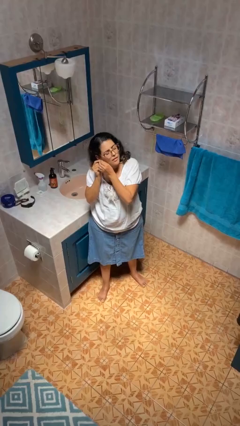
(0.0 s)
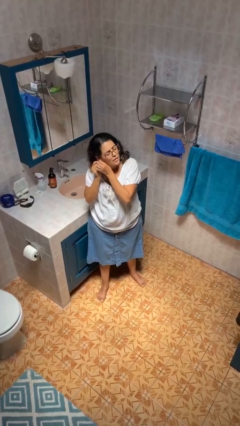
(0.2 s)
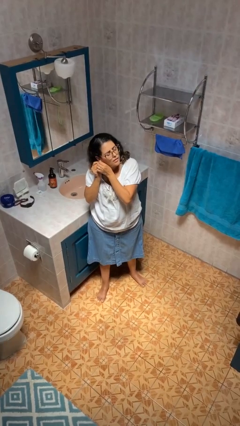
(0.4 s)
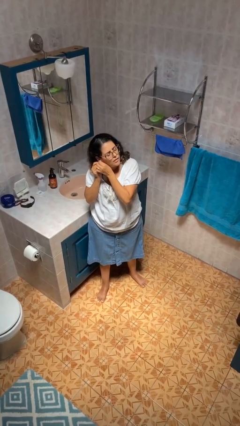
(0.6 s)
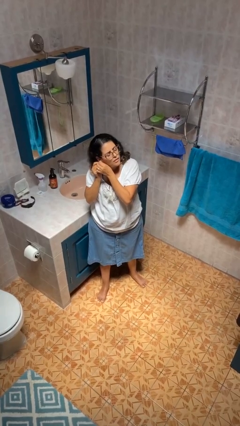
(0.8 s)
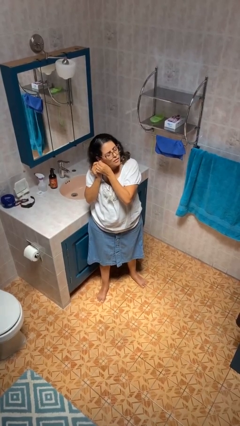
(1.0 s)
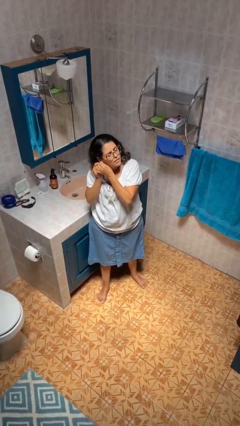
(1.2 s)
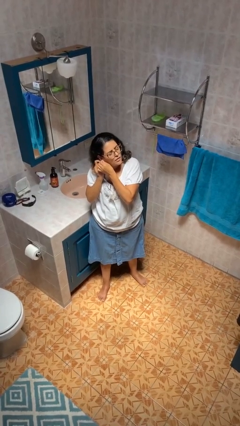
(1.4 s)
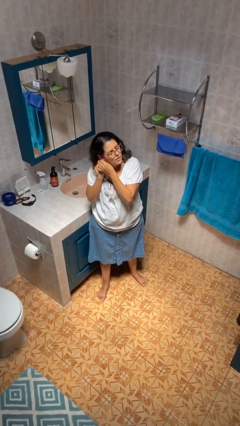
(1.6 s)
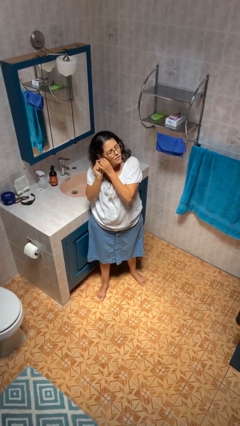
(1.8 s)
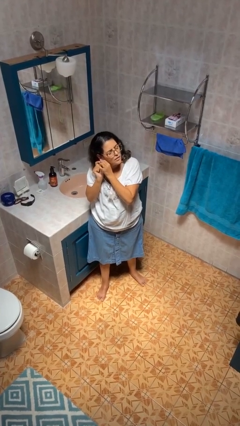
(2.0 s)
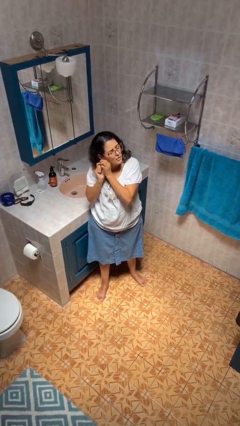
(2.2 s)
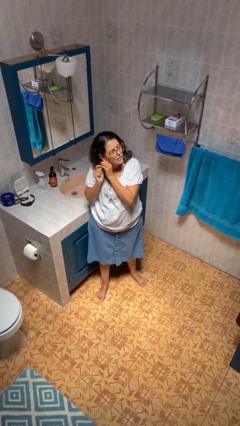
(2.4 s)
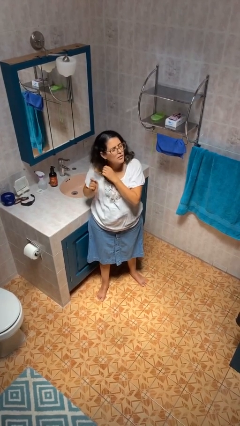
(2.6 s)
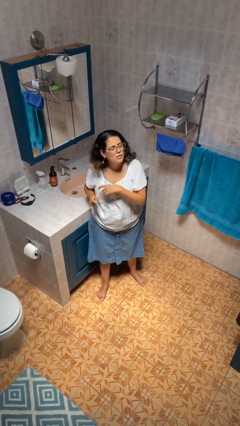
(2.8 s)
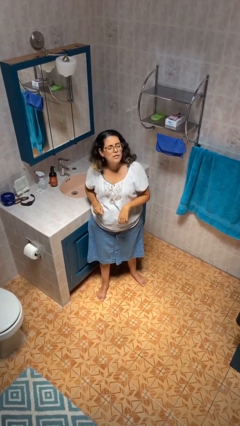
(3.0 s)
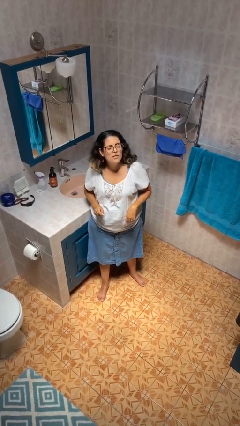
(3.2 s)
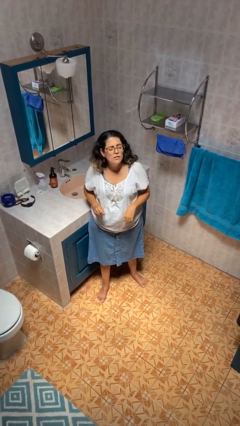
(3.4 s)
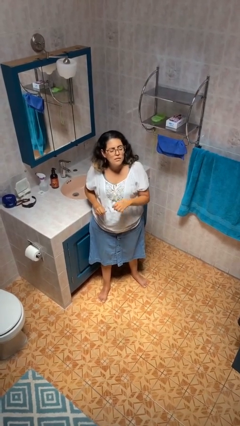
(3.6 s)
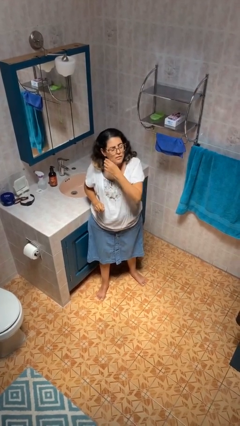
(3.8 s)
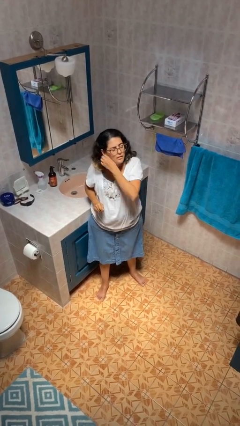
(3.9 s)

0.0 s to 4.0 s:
person puts on earrings

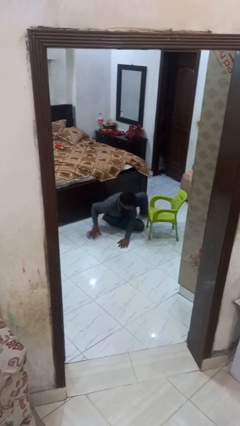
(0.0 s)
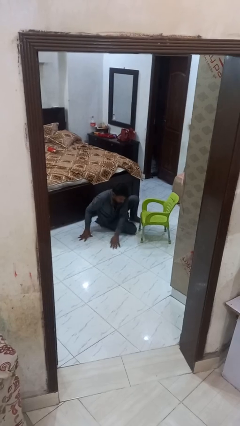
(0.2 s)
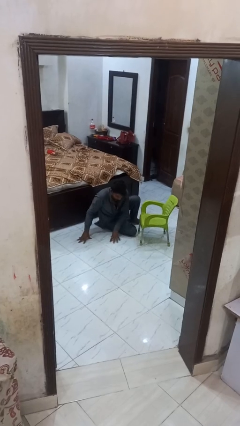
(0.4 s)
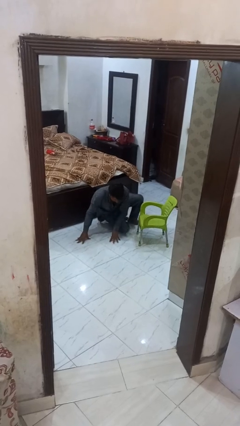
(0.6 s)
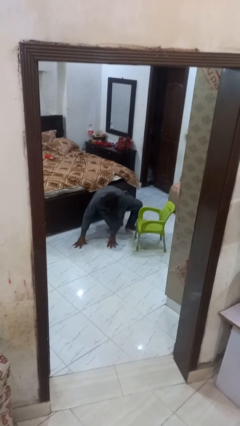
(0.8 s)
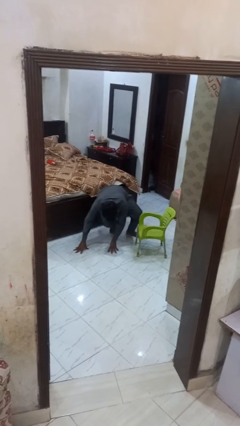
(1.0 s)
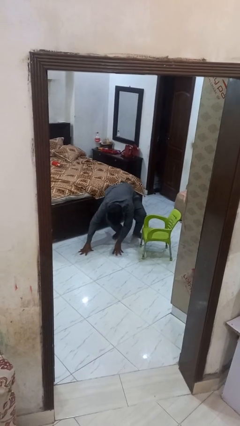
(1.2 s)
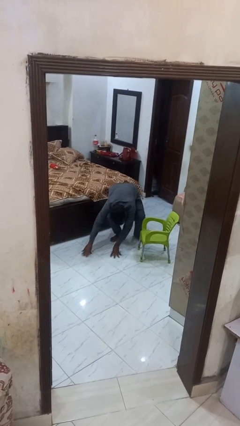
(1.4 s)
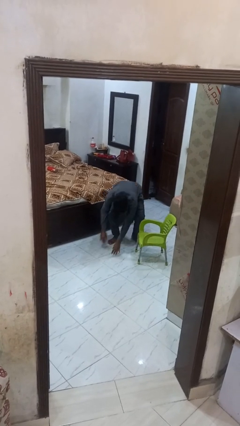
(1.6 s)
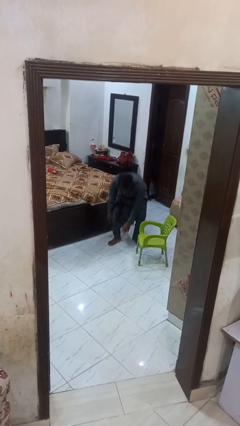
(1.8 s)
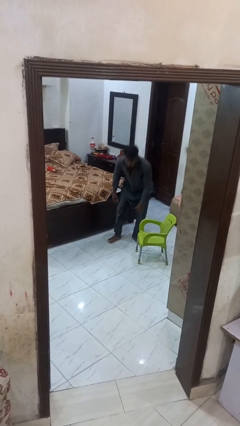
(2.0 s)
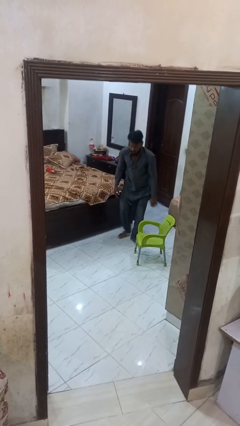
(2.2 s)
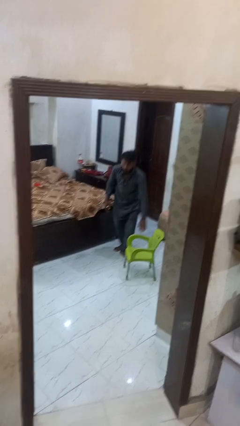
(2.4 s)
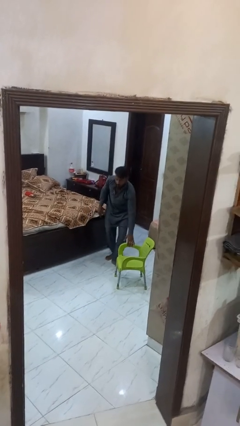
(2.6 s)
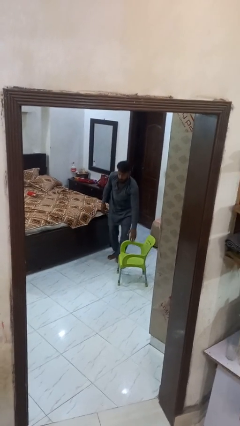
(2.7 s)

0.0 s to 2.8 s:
person stands up from floor

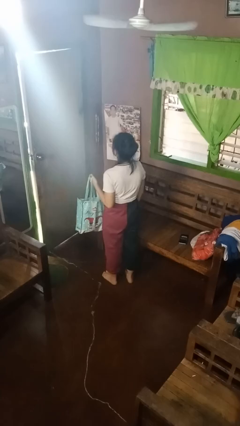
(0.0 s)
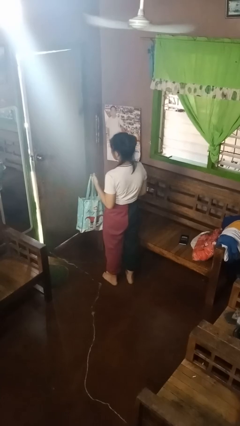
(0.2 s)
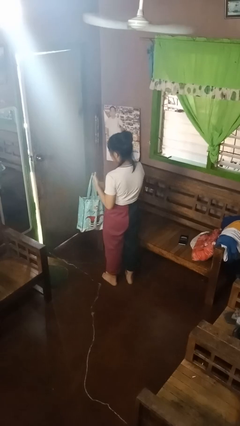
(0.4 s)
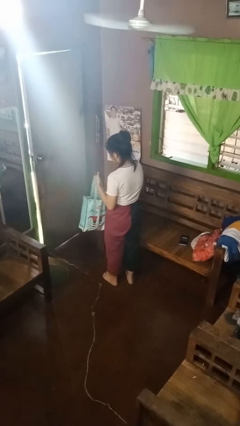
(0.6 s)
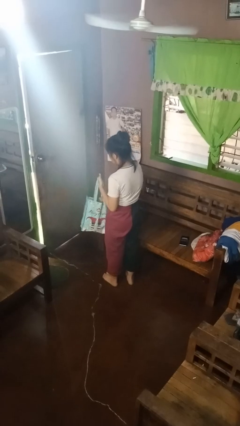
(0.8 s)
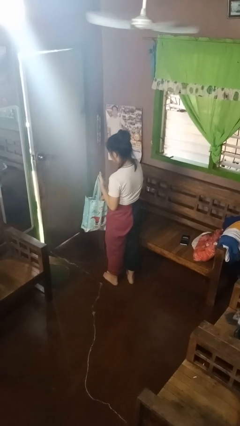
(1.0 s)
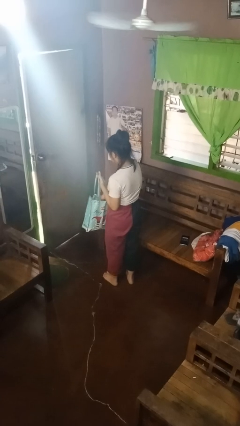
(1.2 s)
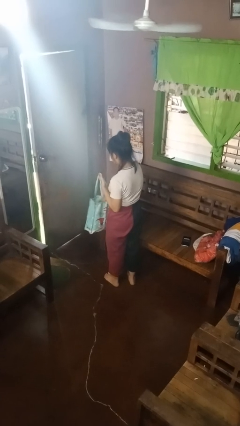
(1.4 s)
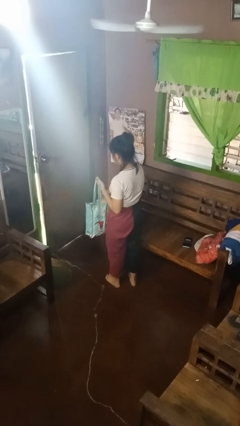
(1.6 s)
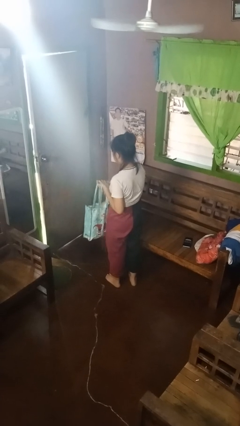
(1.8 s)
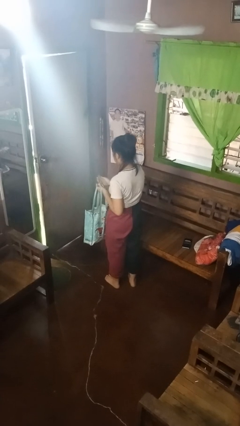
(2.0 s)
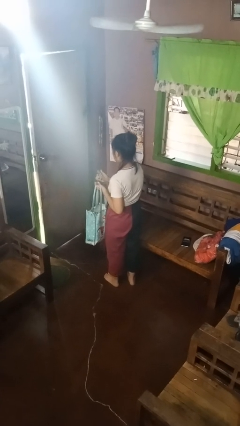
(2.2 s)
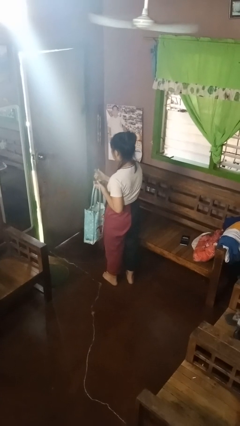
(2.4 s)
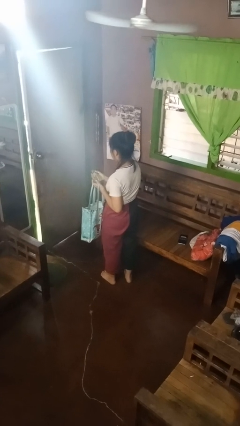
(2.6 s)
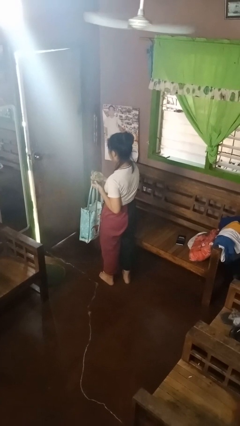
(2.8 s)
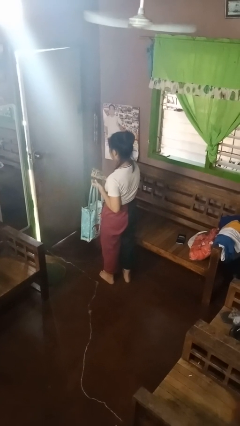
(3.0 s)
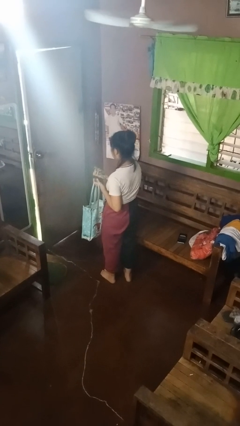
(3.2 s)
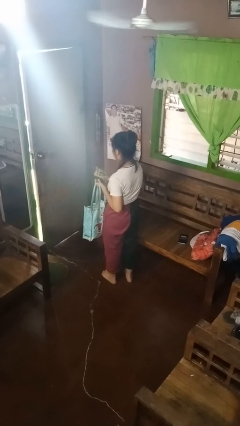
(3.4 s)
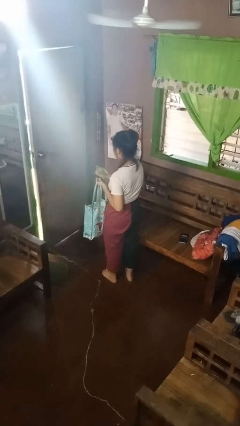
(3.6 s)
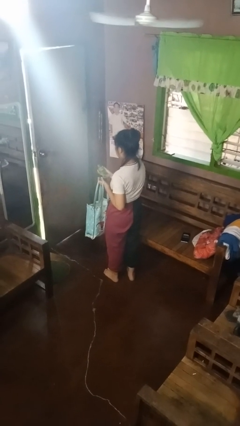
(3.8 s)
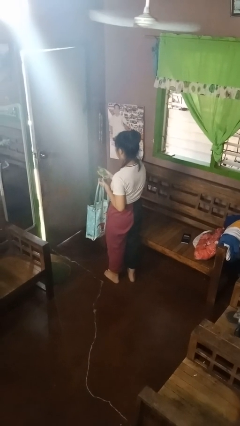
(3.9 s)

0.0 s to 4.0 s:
person takes object from bag

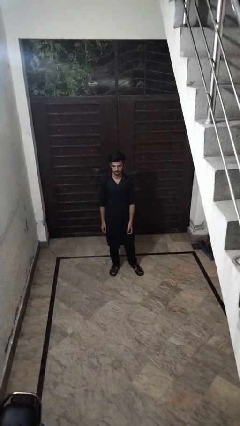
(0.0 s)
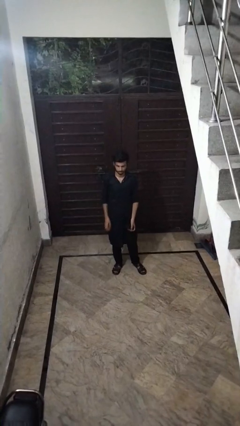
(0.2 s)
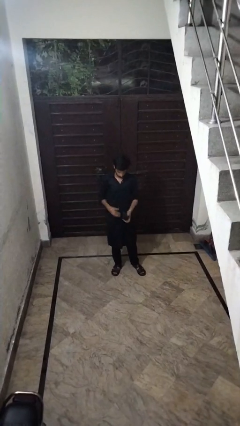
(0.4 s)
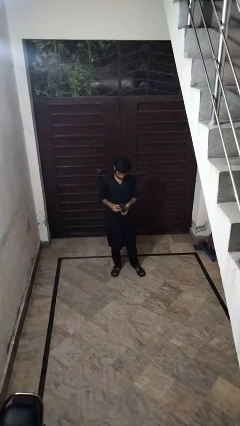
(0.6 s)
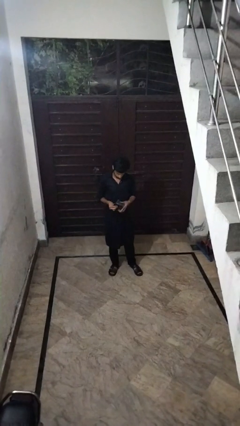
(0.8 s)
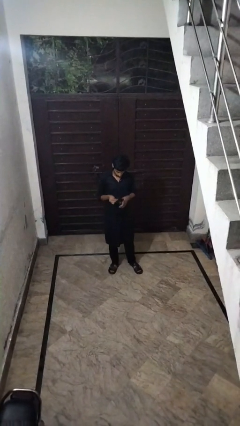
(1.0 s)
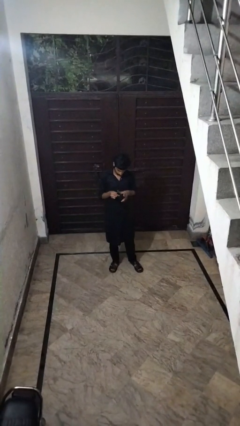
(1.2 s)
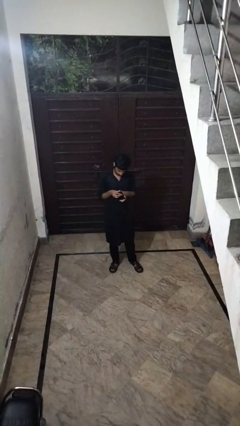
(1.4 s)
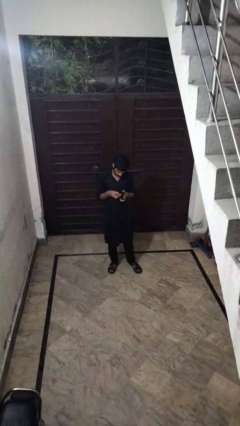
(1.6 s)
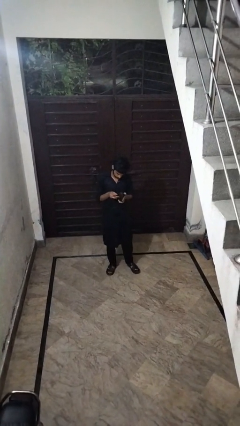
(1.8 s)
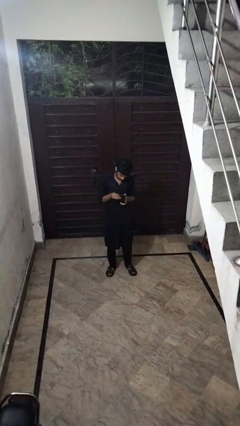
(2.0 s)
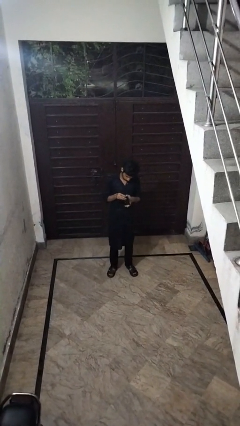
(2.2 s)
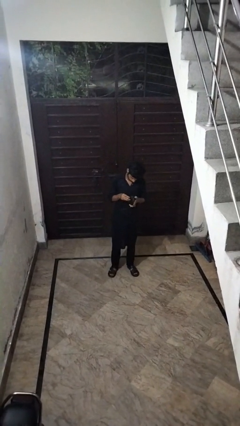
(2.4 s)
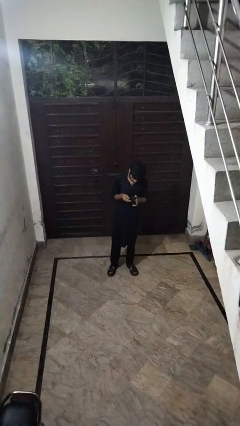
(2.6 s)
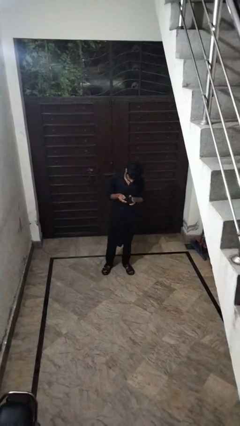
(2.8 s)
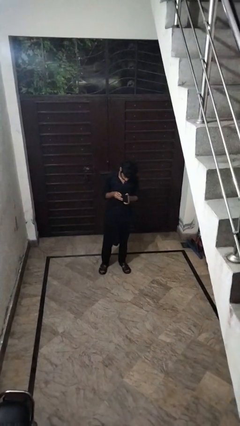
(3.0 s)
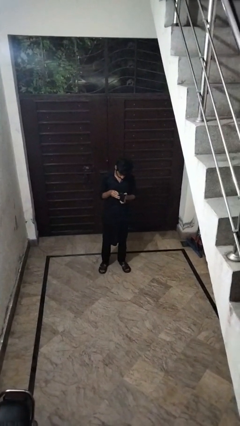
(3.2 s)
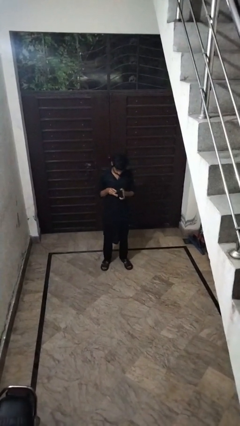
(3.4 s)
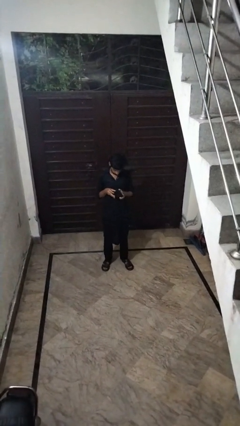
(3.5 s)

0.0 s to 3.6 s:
person searches in purse

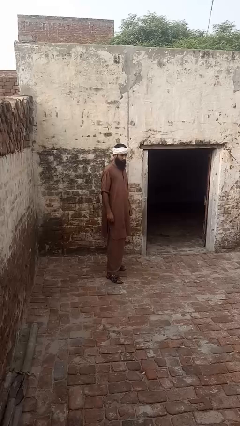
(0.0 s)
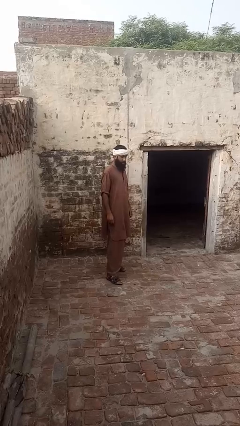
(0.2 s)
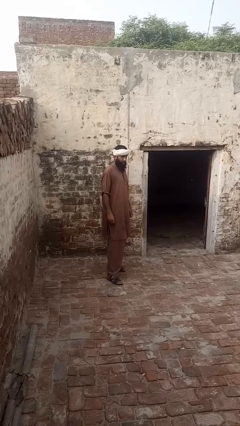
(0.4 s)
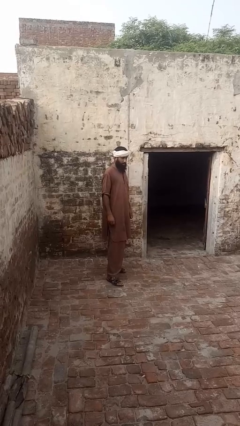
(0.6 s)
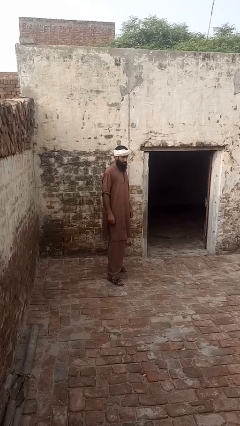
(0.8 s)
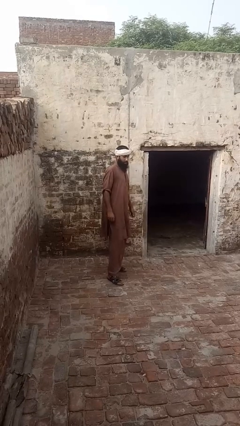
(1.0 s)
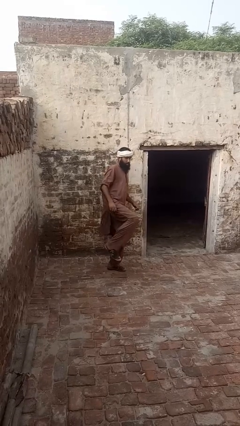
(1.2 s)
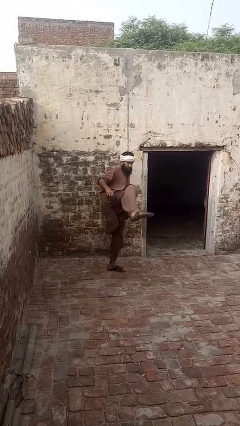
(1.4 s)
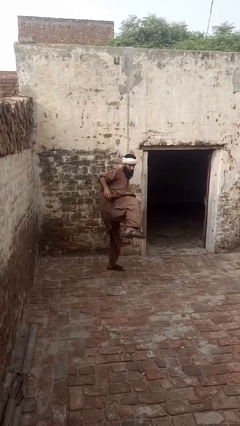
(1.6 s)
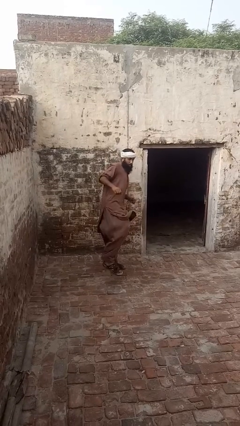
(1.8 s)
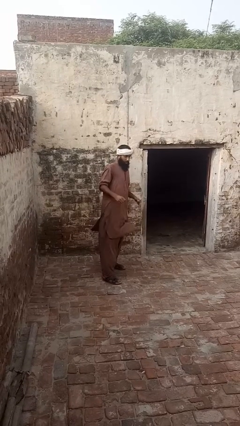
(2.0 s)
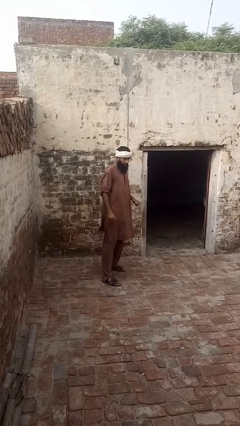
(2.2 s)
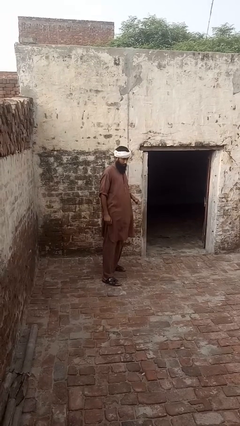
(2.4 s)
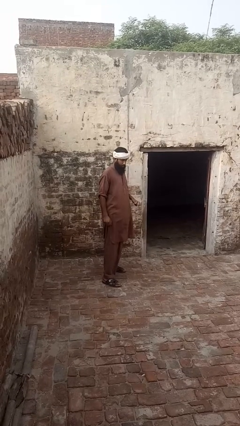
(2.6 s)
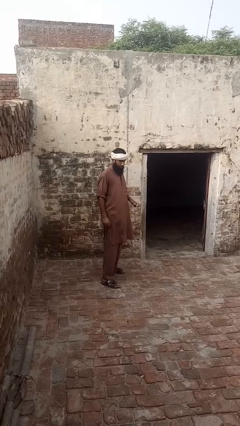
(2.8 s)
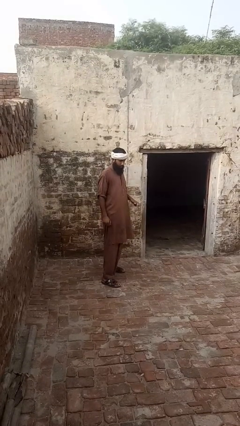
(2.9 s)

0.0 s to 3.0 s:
person karate kicks

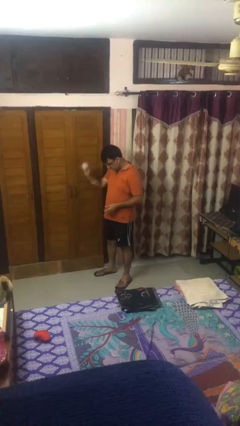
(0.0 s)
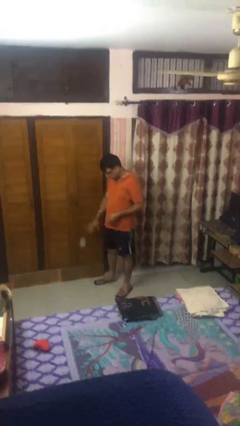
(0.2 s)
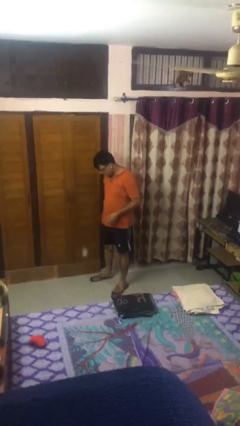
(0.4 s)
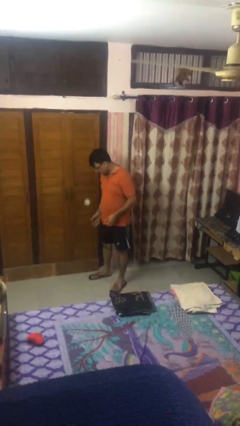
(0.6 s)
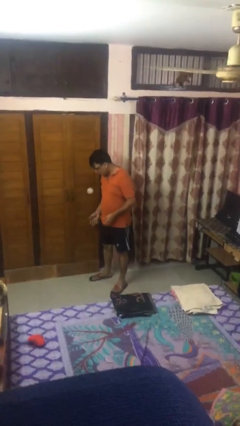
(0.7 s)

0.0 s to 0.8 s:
person bounces ball on floor
